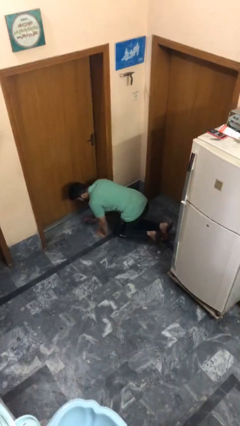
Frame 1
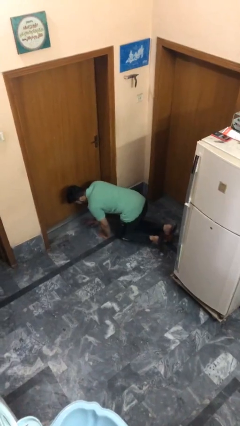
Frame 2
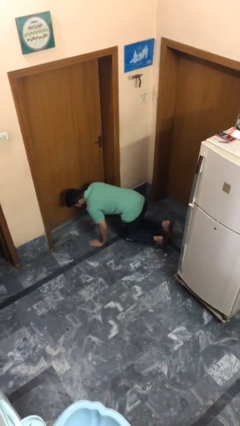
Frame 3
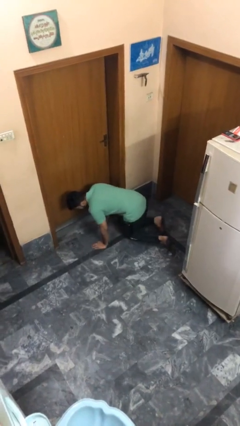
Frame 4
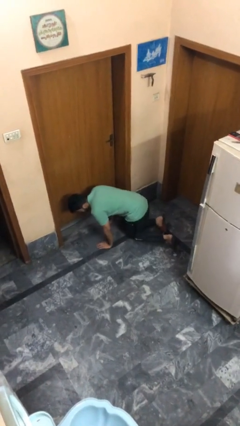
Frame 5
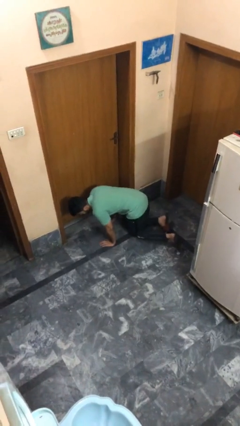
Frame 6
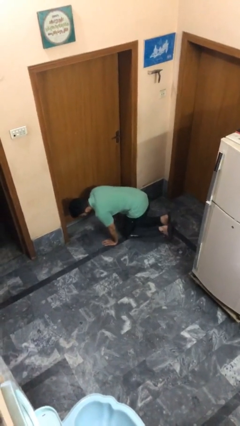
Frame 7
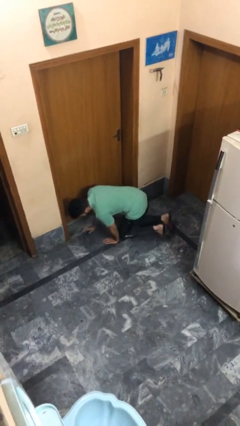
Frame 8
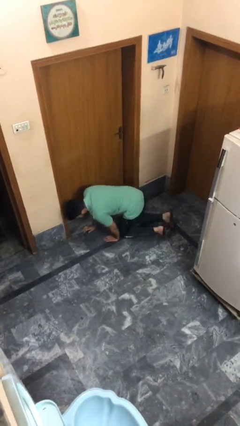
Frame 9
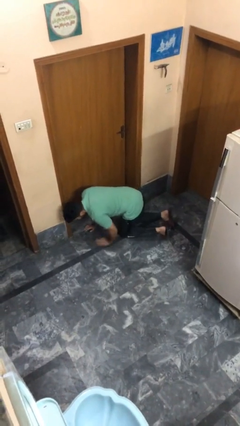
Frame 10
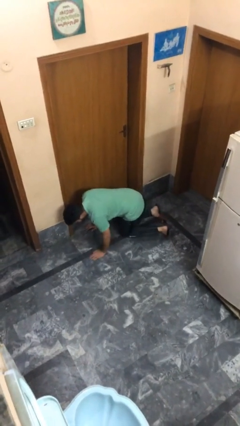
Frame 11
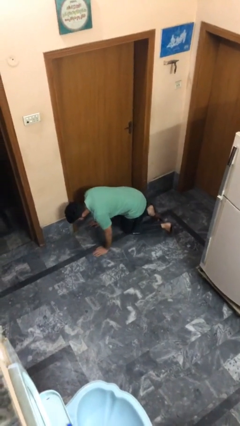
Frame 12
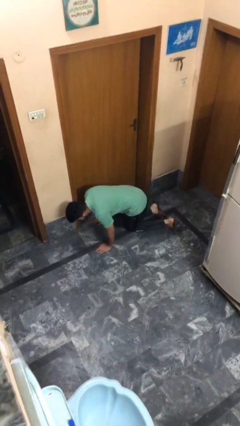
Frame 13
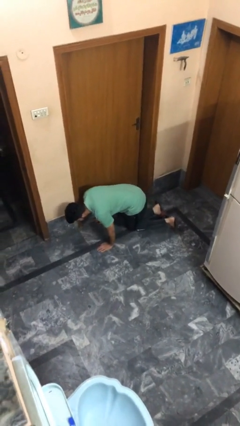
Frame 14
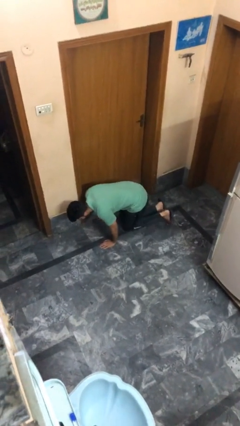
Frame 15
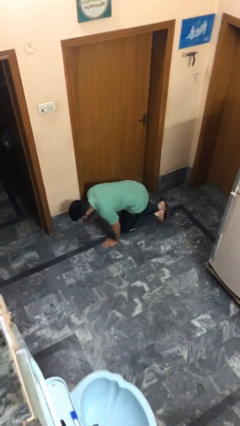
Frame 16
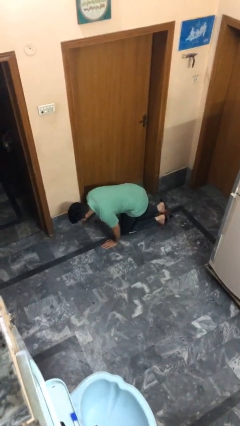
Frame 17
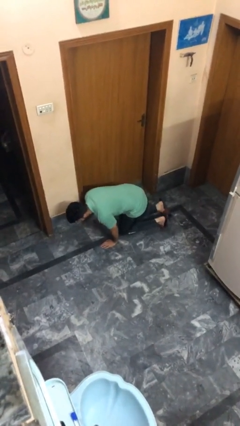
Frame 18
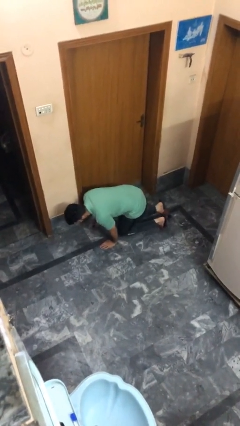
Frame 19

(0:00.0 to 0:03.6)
person crawls

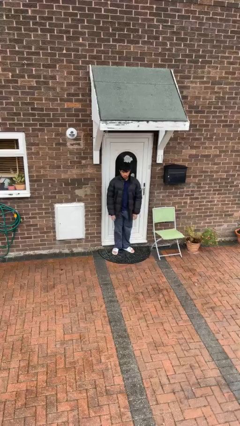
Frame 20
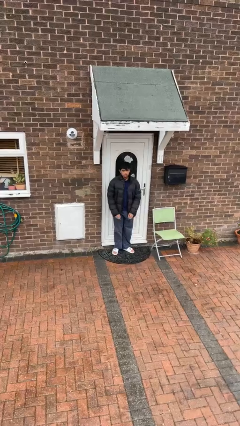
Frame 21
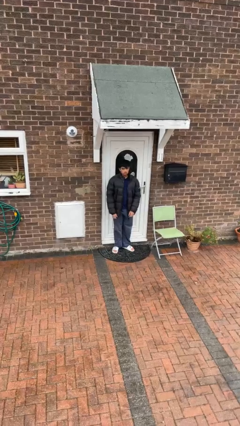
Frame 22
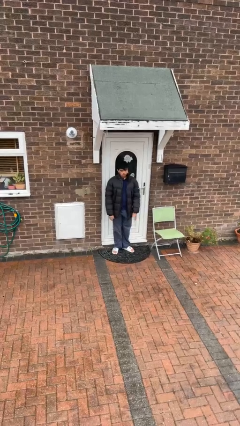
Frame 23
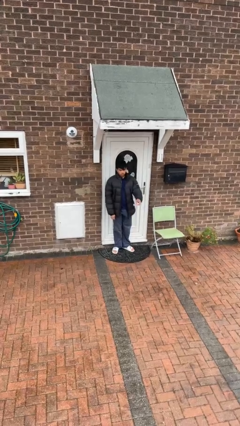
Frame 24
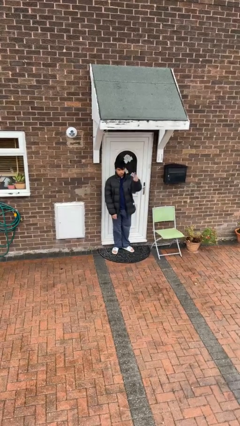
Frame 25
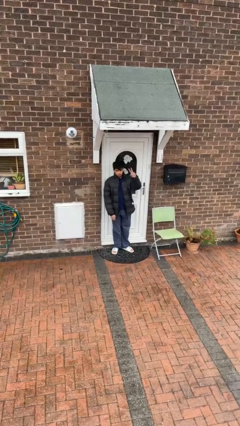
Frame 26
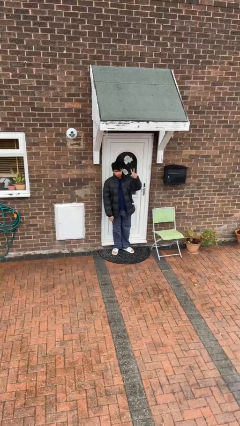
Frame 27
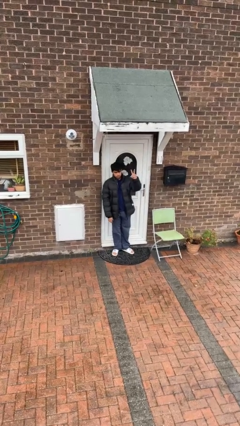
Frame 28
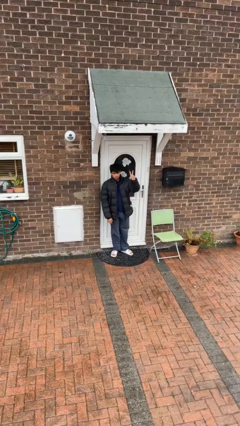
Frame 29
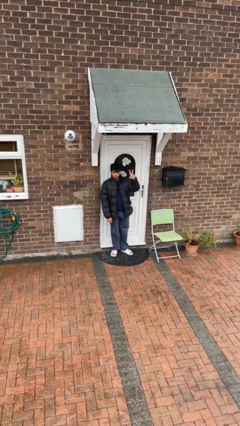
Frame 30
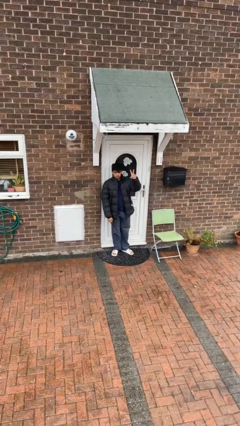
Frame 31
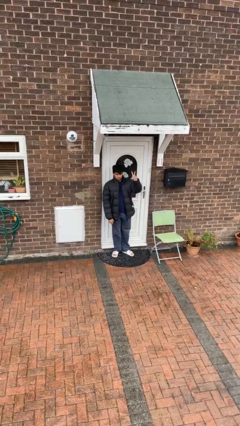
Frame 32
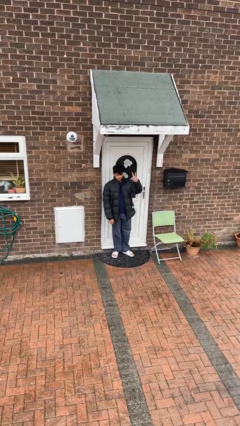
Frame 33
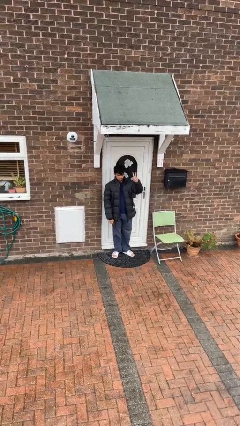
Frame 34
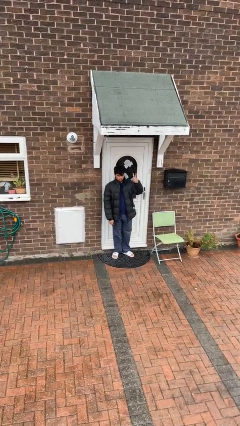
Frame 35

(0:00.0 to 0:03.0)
person gestures peace

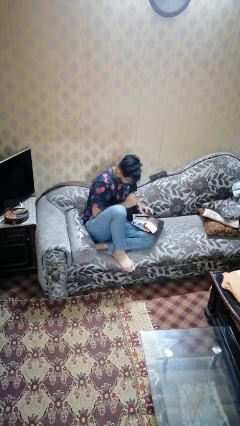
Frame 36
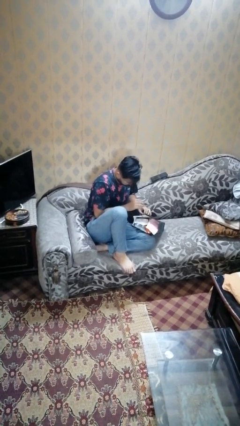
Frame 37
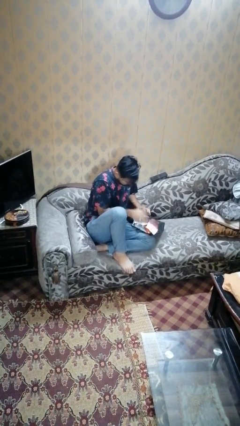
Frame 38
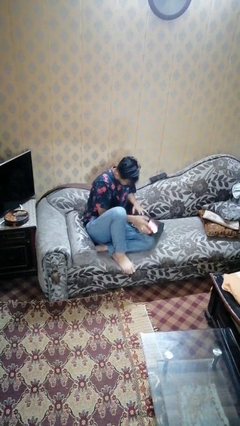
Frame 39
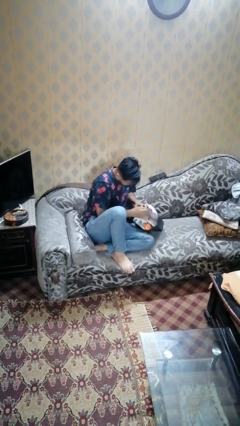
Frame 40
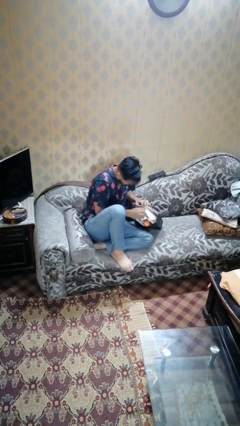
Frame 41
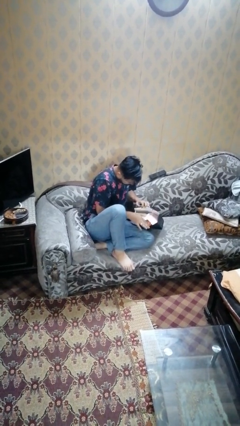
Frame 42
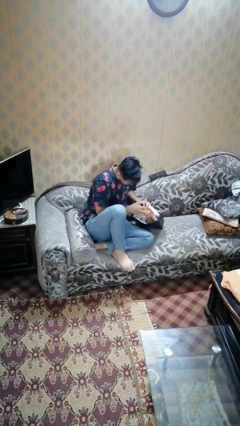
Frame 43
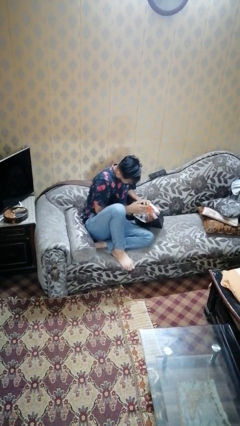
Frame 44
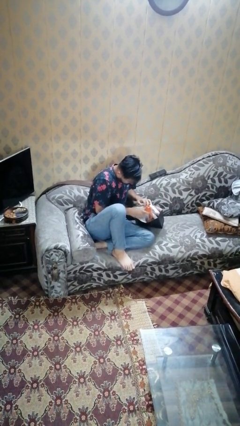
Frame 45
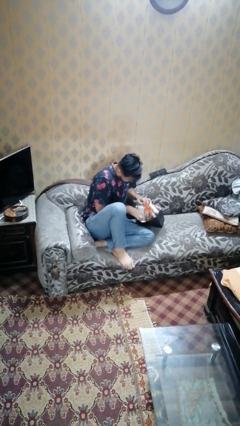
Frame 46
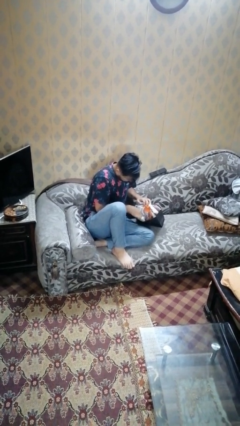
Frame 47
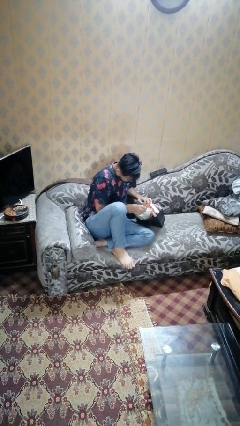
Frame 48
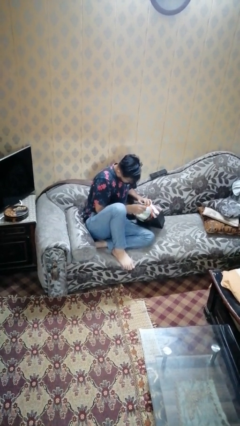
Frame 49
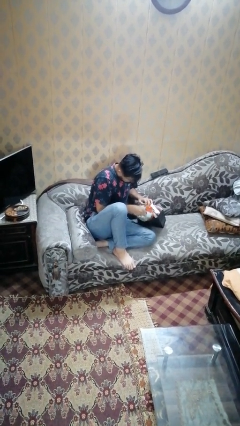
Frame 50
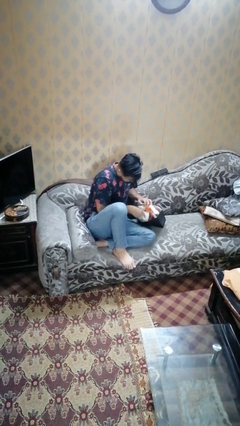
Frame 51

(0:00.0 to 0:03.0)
person searches in bag

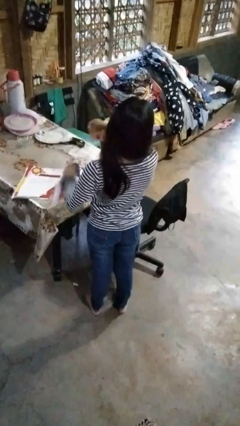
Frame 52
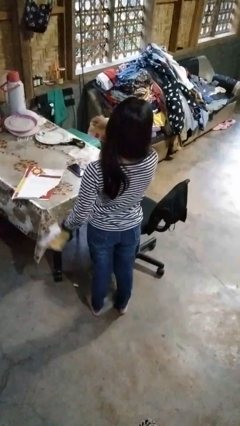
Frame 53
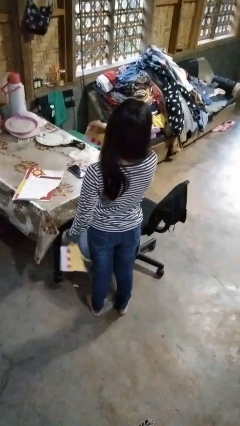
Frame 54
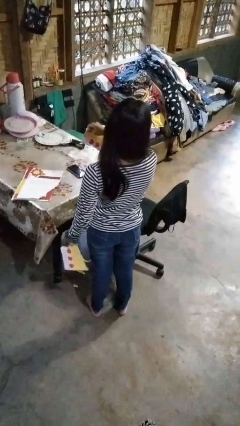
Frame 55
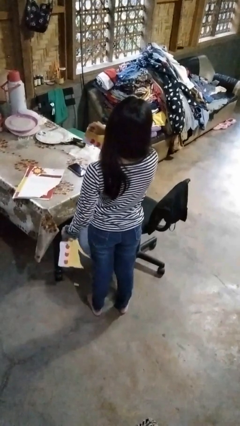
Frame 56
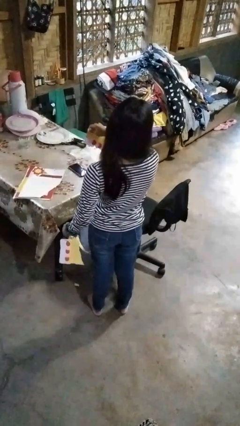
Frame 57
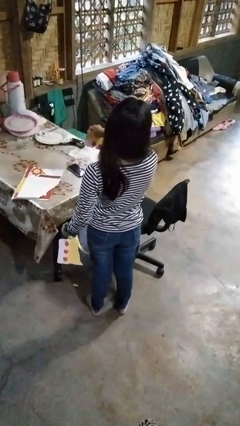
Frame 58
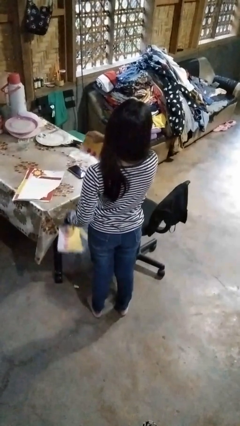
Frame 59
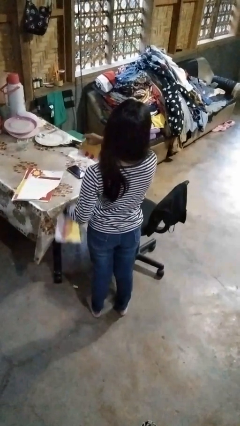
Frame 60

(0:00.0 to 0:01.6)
person tears paper

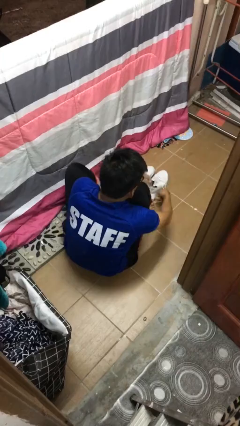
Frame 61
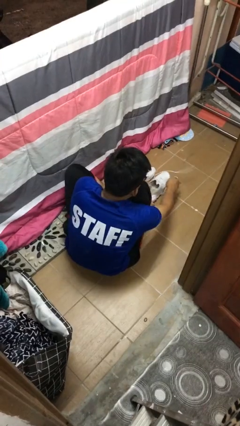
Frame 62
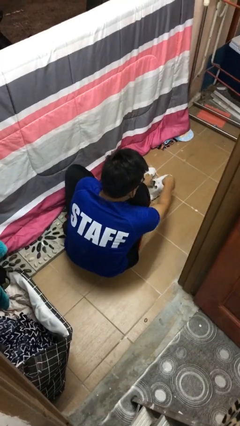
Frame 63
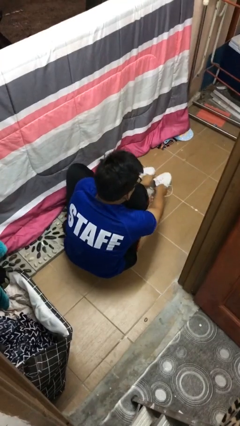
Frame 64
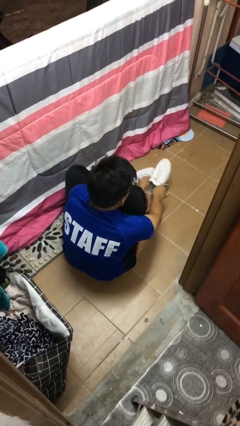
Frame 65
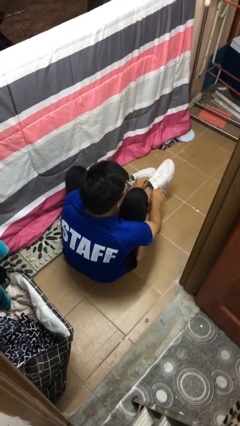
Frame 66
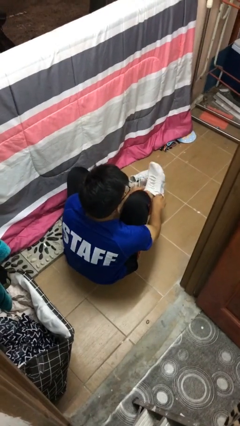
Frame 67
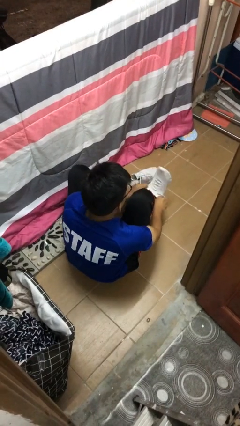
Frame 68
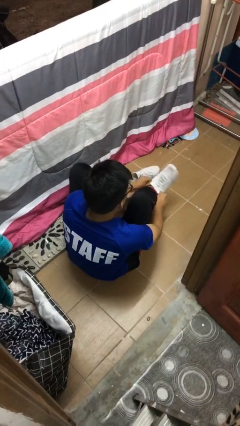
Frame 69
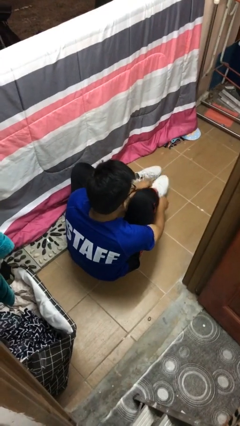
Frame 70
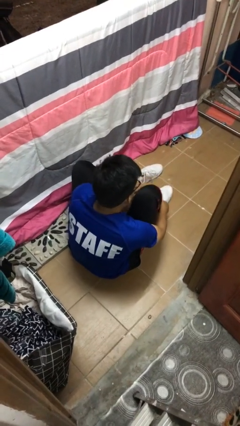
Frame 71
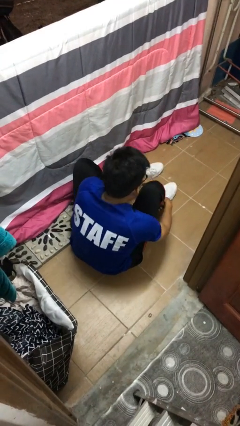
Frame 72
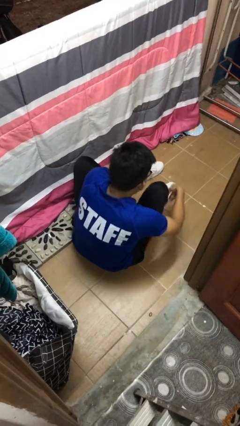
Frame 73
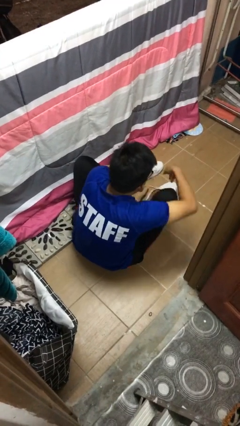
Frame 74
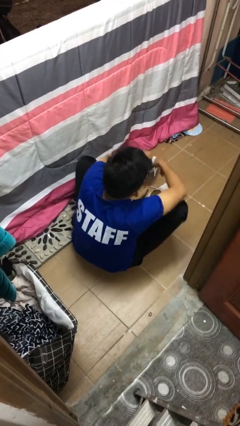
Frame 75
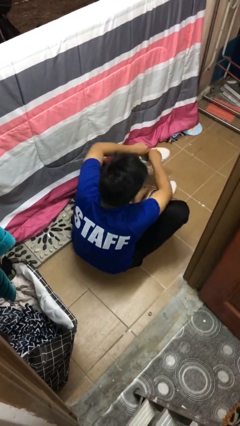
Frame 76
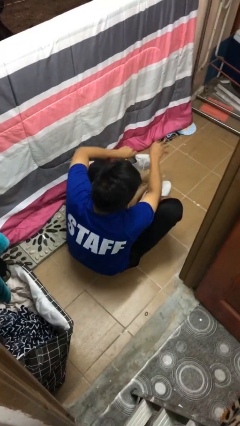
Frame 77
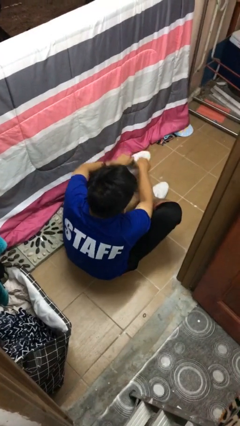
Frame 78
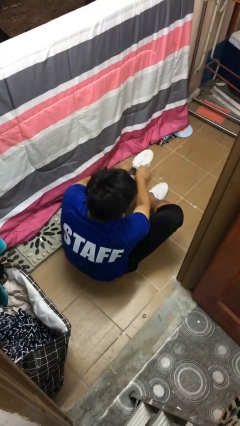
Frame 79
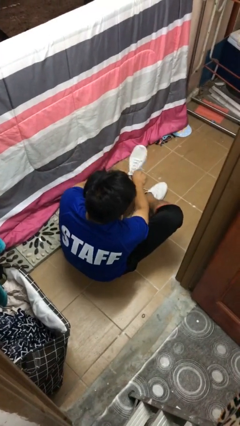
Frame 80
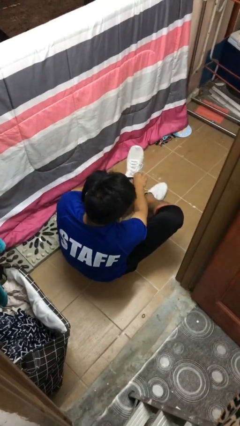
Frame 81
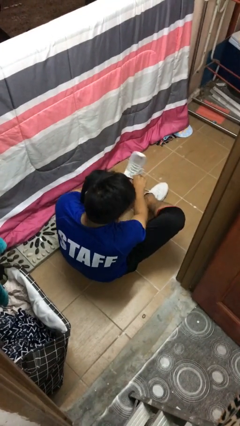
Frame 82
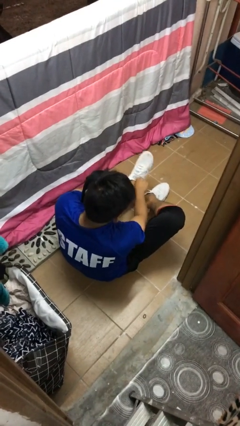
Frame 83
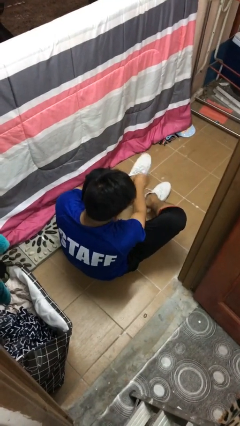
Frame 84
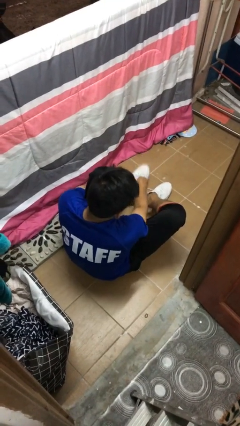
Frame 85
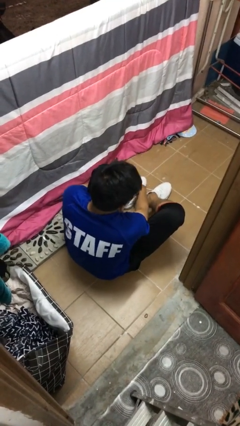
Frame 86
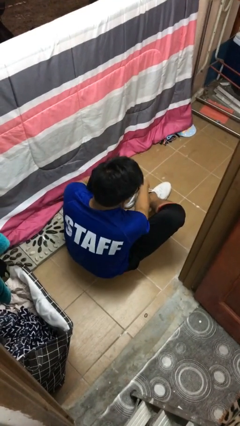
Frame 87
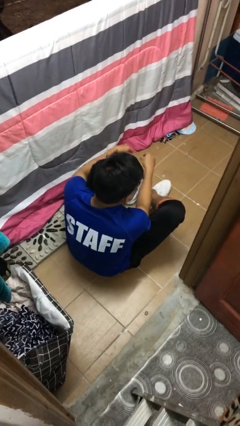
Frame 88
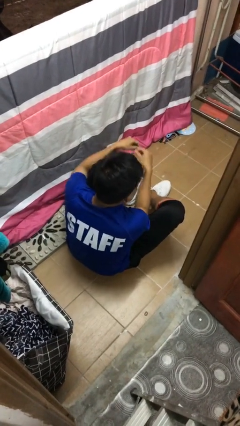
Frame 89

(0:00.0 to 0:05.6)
person puts on shoes

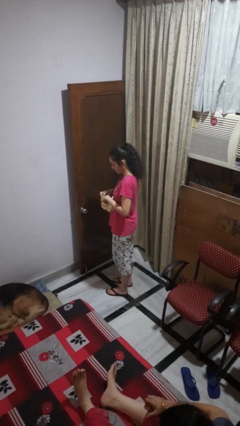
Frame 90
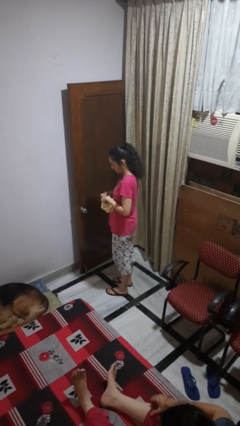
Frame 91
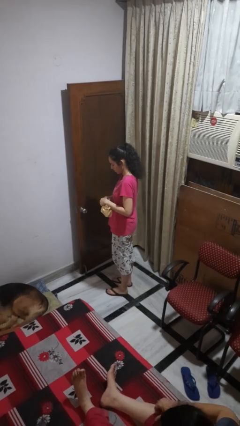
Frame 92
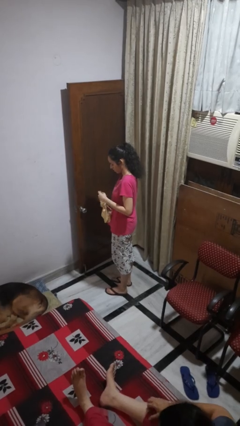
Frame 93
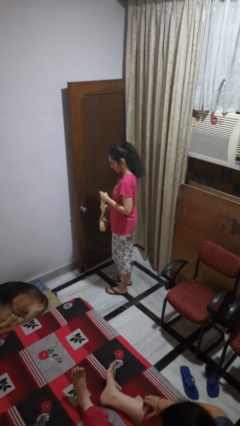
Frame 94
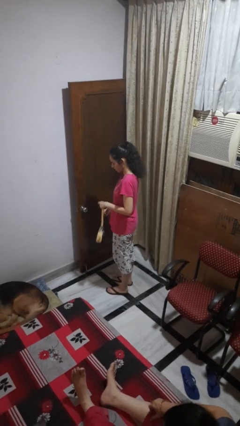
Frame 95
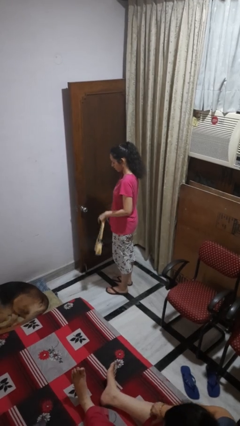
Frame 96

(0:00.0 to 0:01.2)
person puts object into purse
